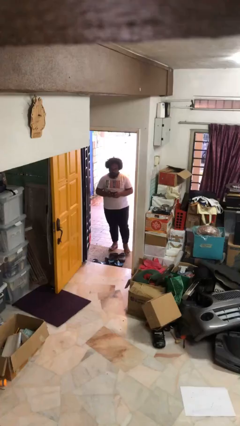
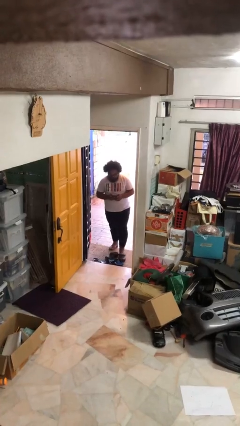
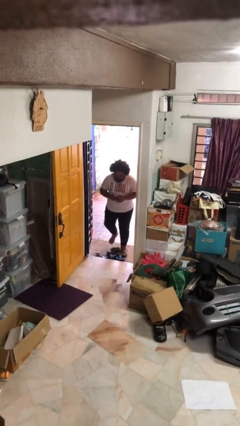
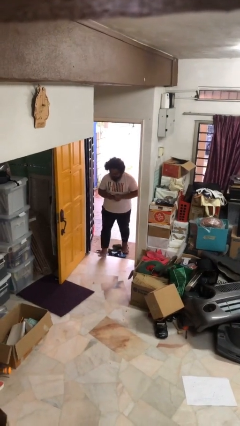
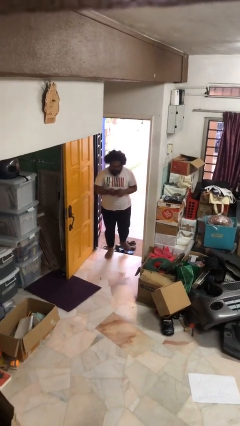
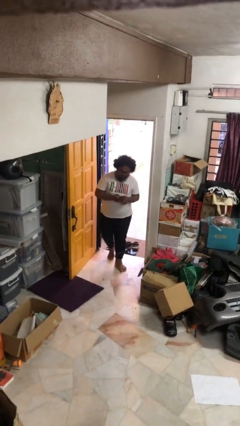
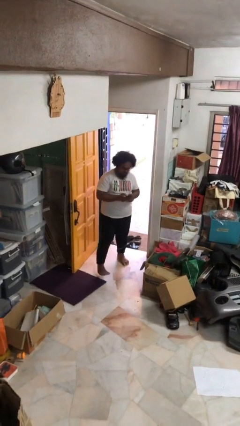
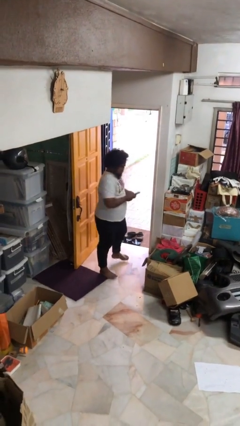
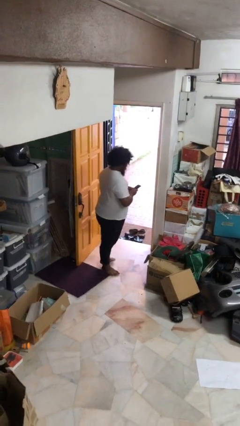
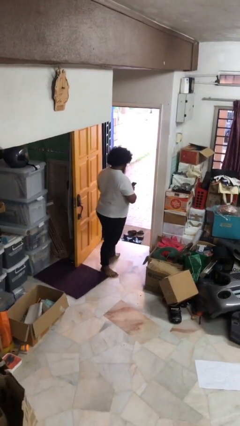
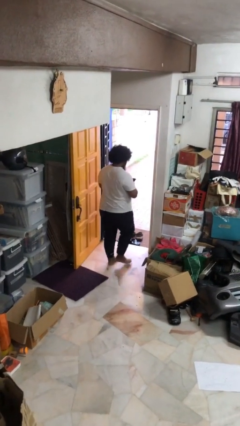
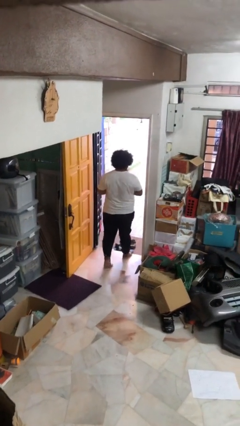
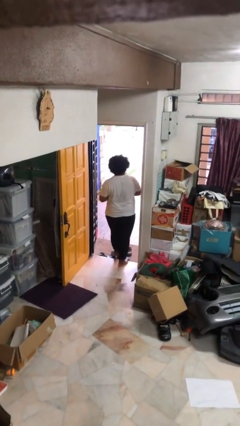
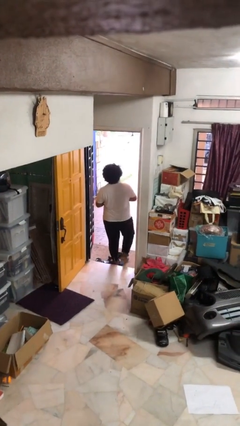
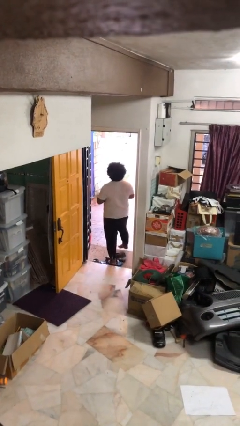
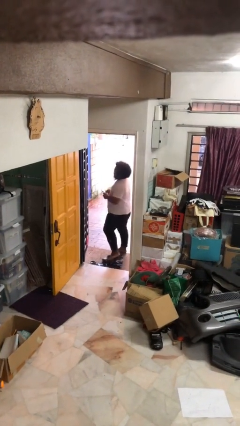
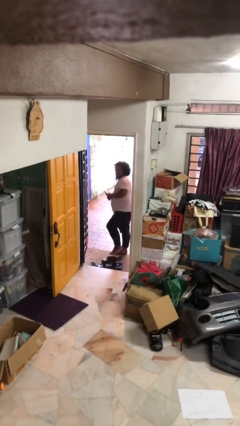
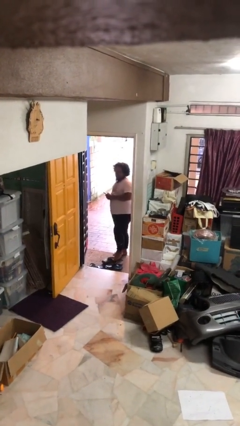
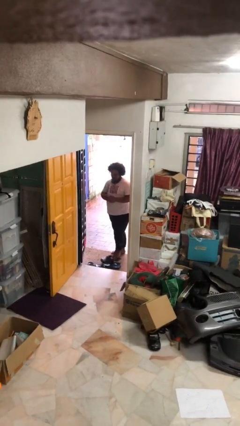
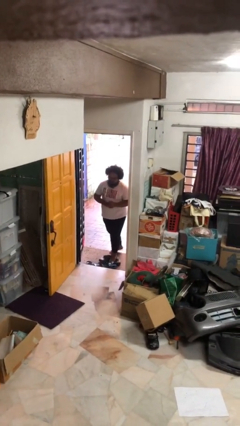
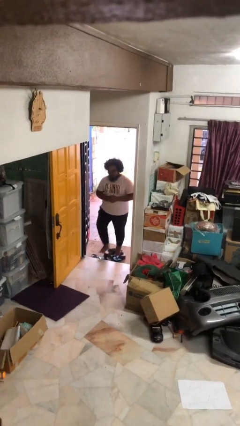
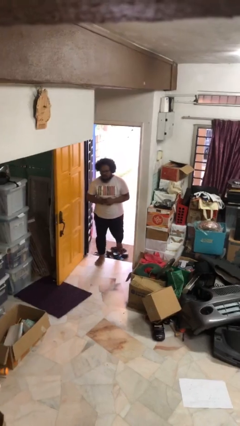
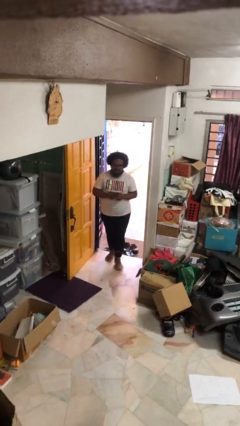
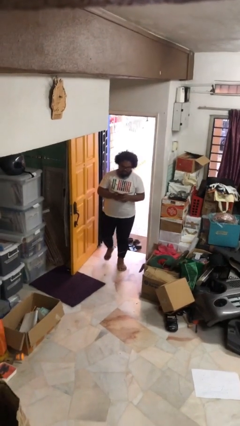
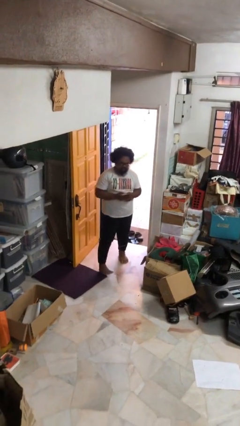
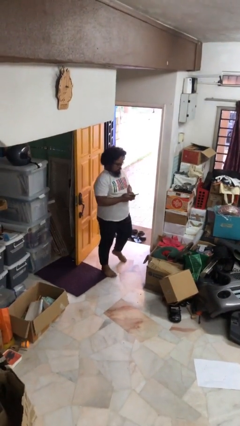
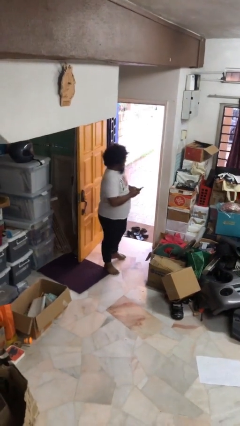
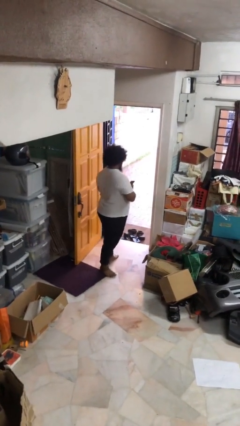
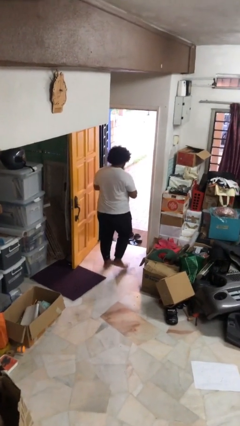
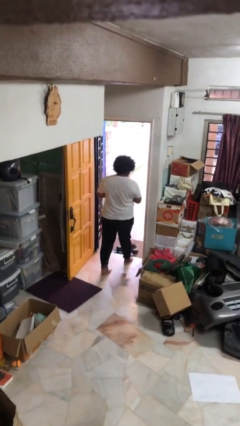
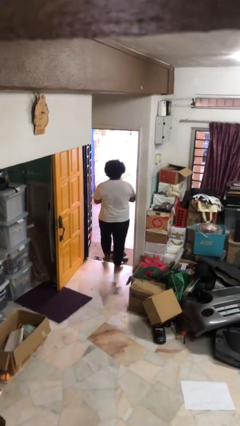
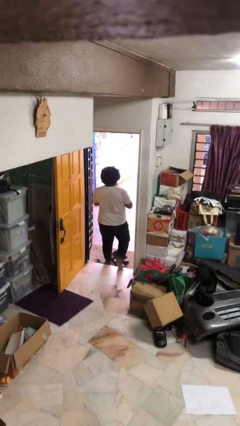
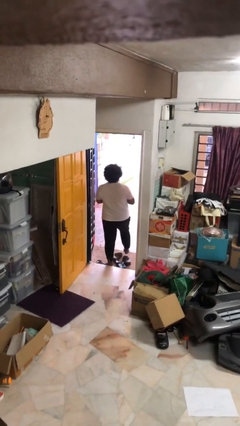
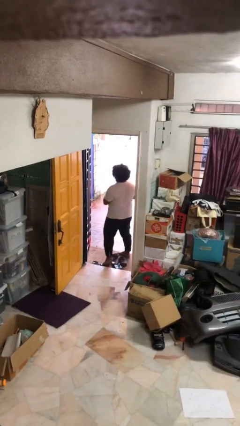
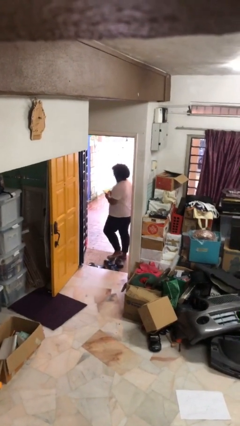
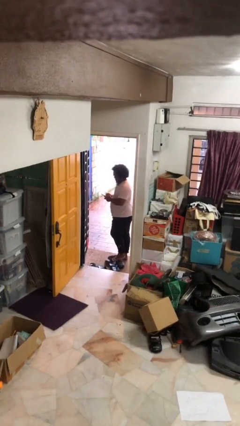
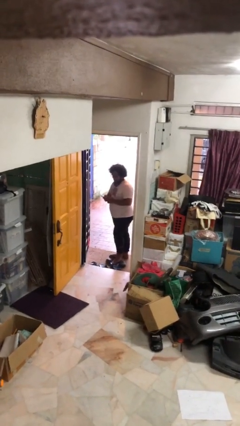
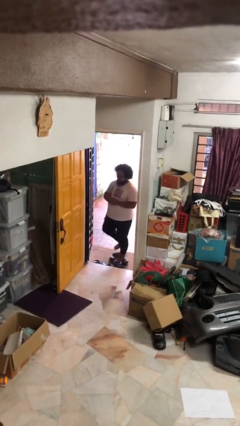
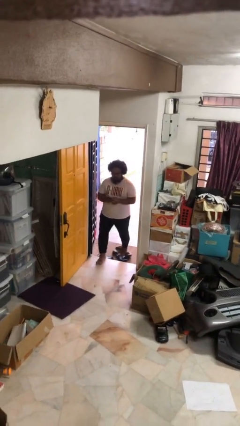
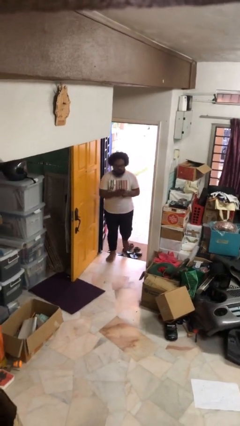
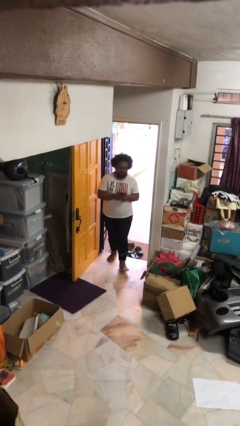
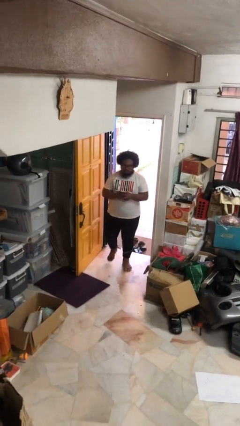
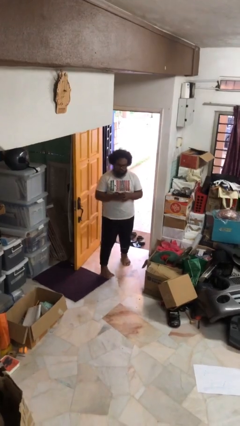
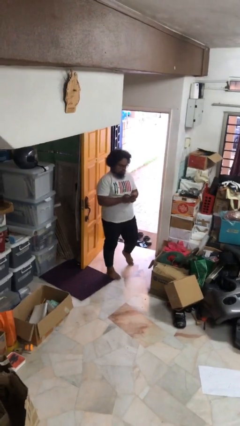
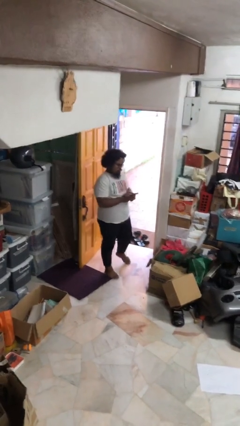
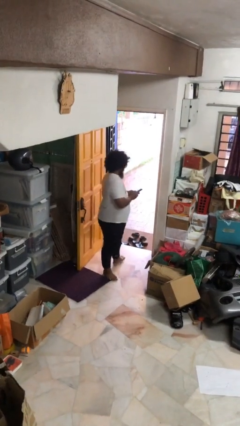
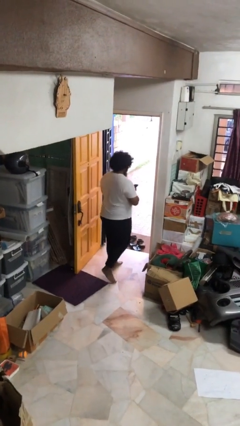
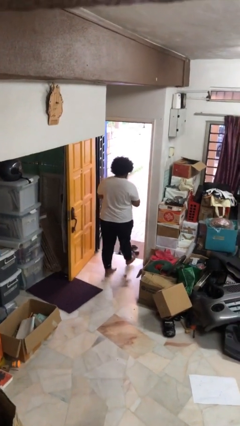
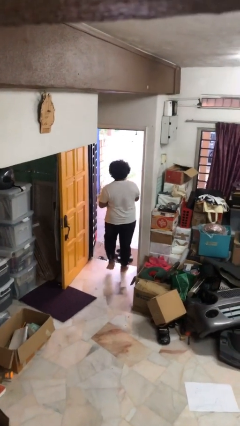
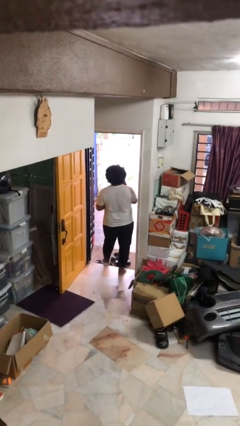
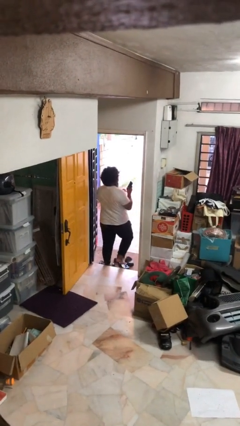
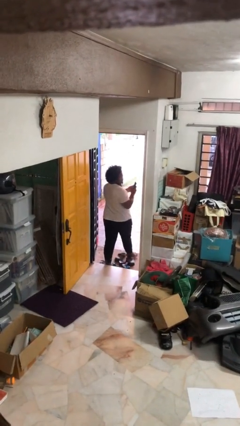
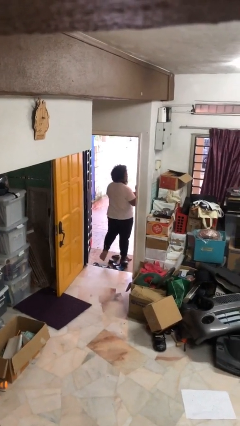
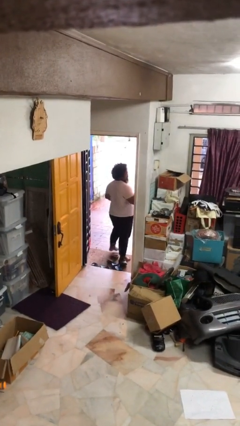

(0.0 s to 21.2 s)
person texts on phone

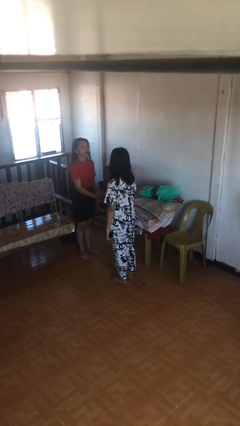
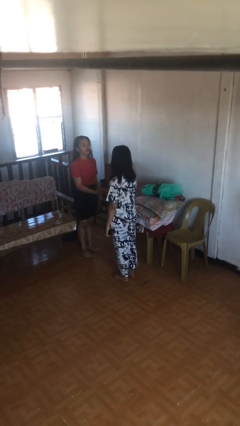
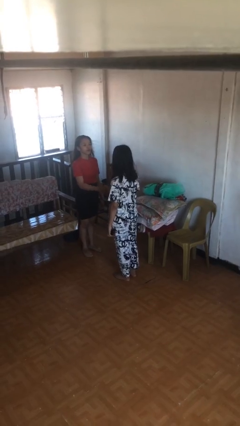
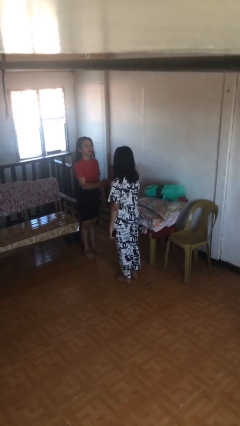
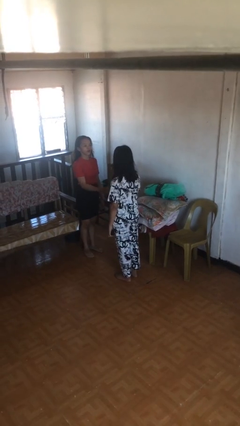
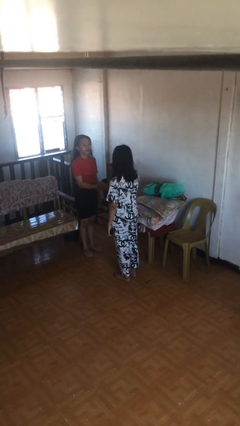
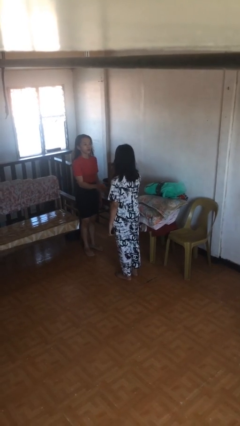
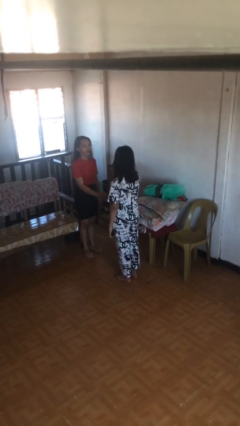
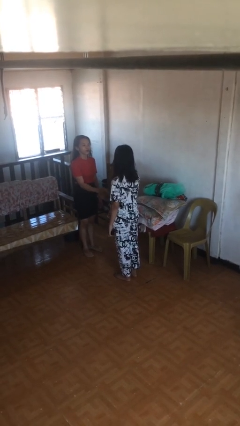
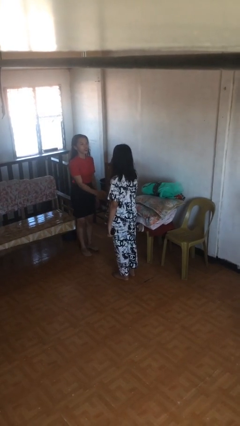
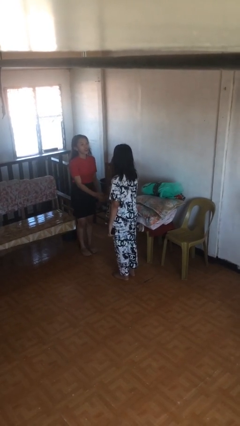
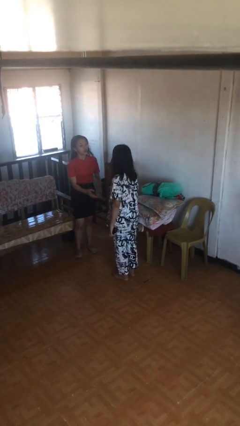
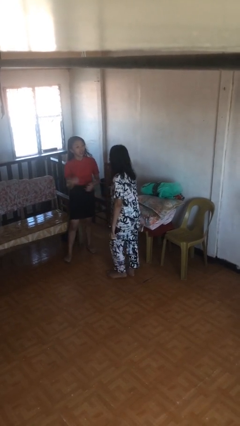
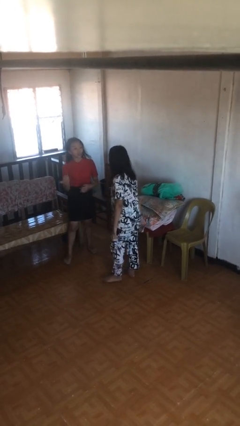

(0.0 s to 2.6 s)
person shakes hand

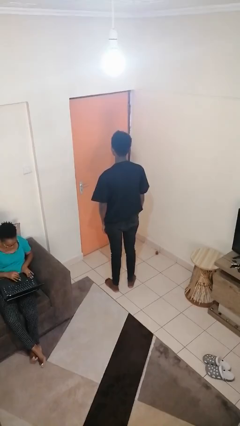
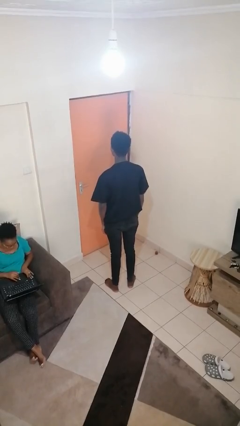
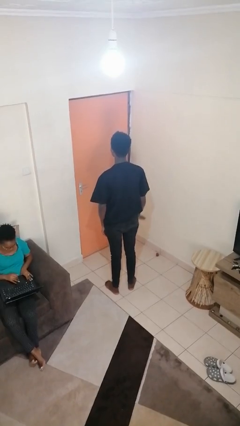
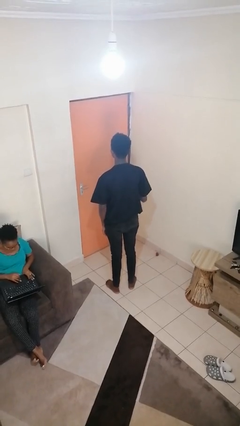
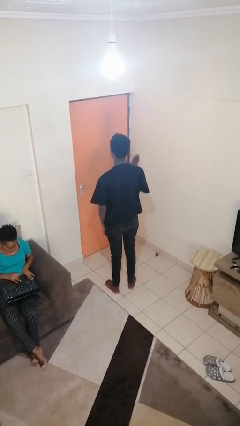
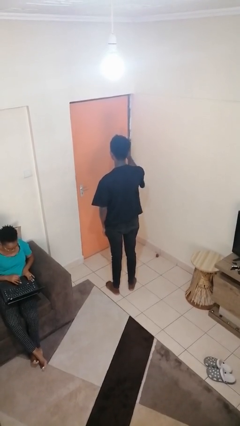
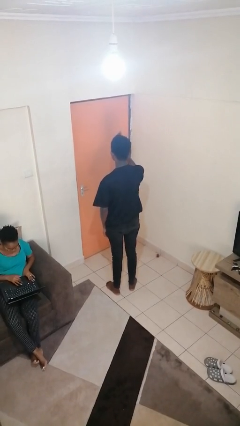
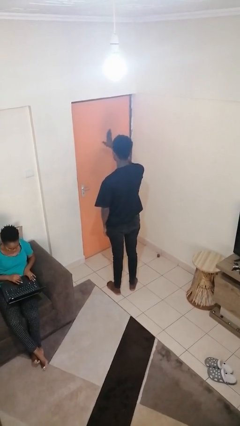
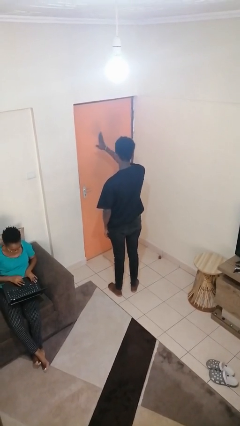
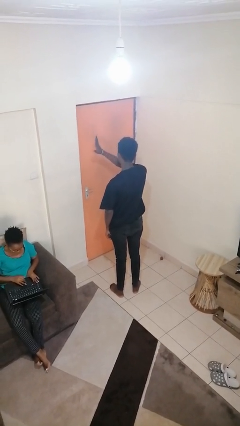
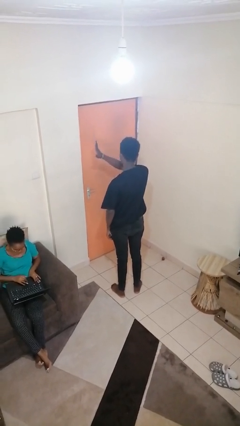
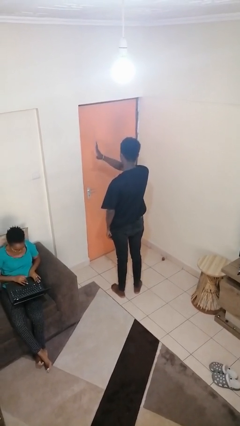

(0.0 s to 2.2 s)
person gestures swipe left

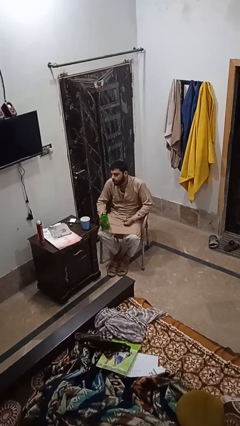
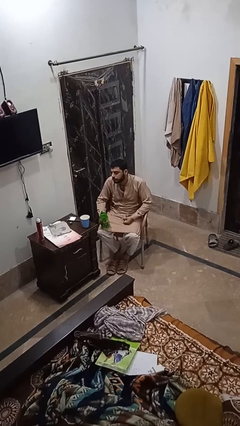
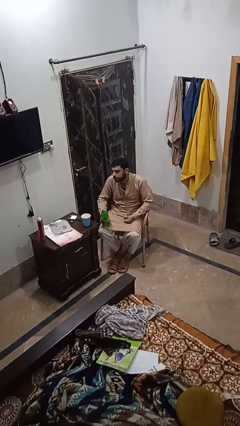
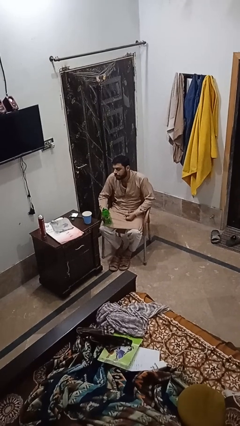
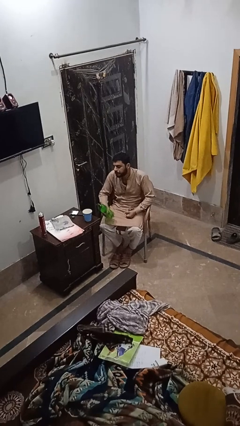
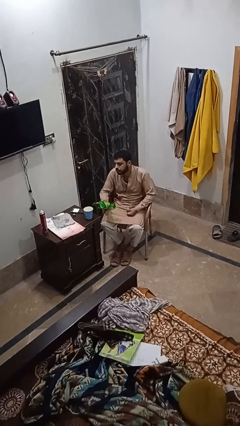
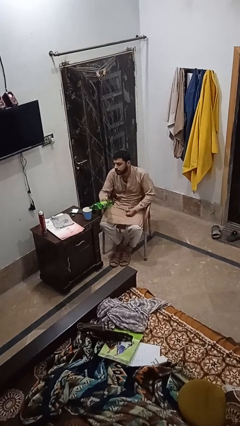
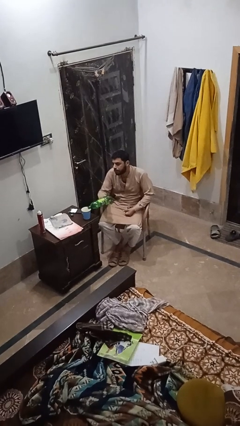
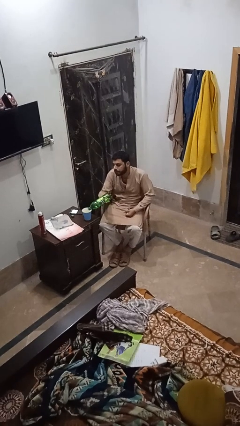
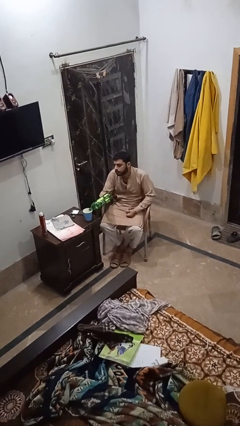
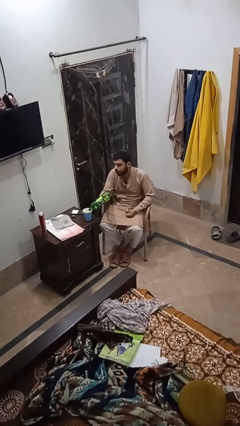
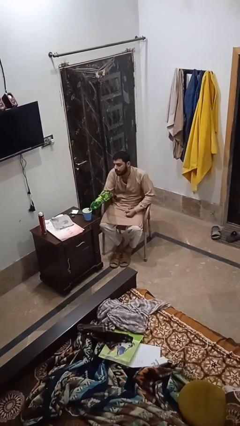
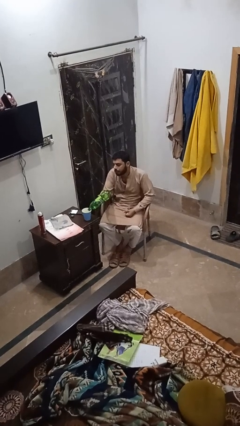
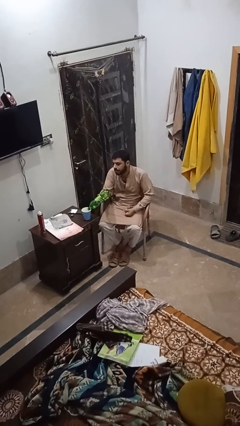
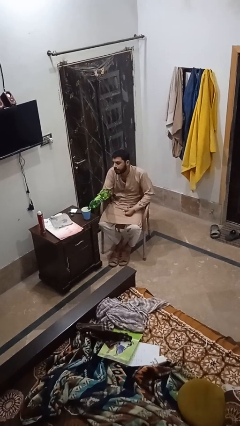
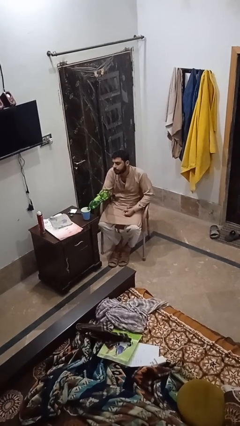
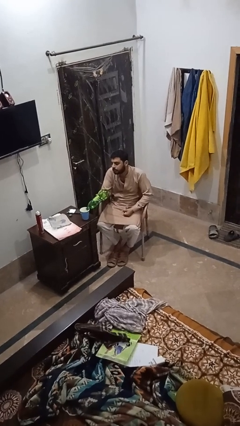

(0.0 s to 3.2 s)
person pours liquid into cup
